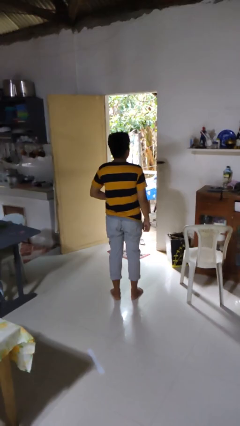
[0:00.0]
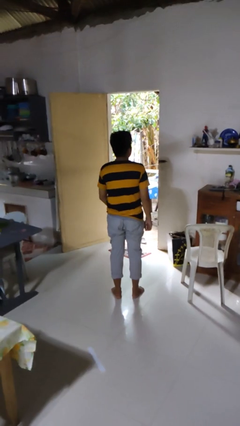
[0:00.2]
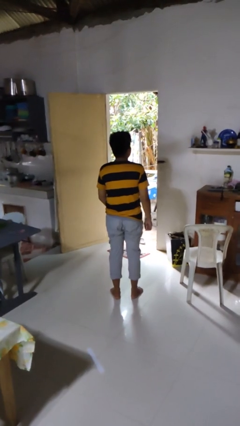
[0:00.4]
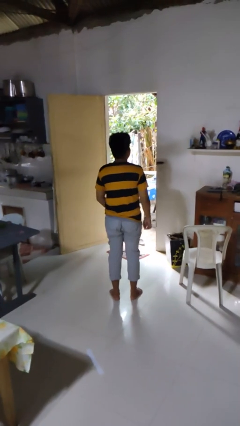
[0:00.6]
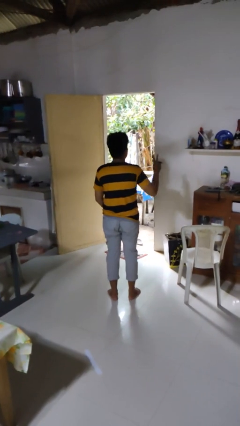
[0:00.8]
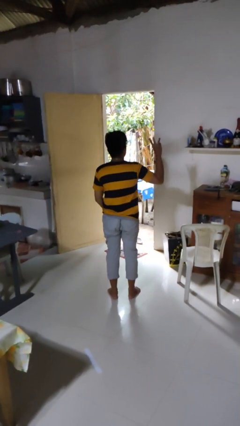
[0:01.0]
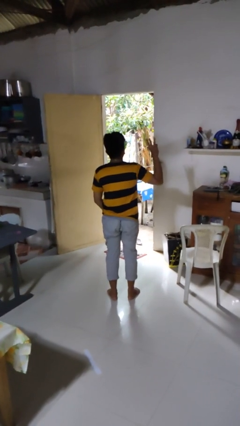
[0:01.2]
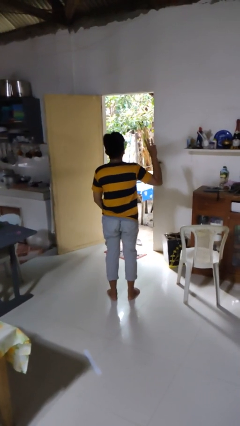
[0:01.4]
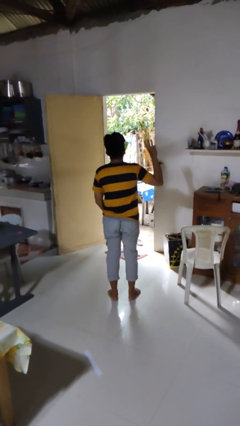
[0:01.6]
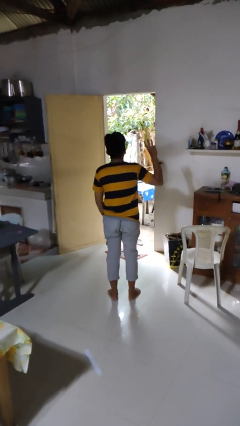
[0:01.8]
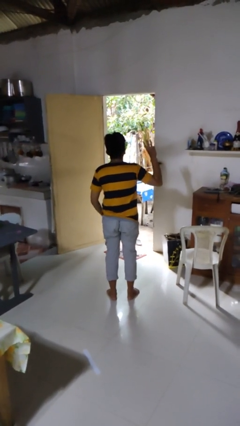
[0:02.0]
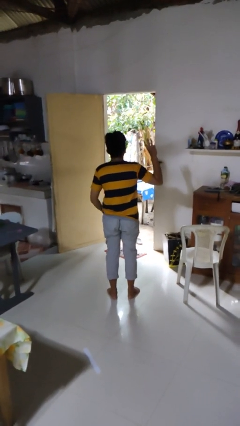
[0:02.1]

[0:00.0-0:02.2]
person gestures number three

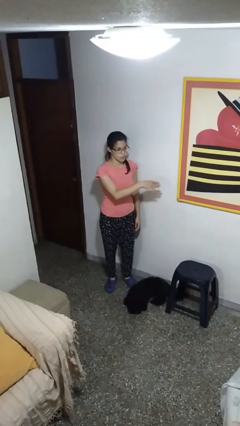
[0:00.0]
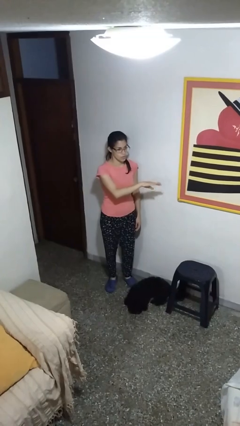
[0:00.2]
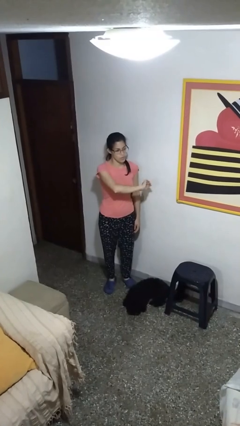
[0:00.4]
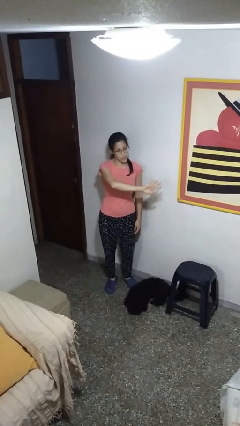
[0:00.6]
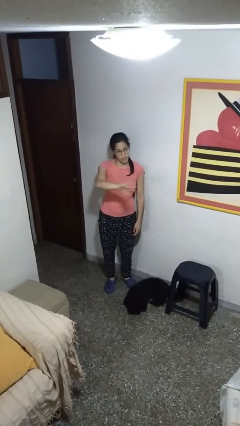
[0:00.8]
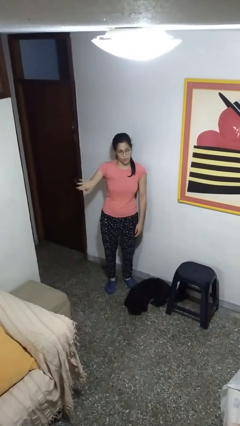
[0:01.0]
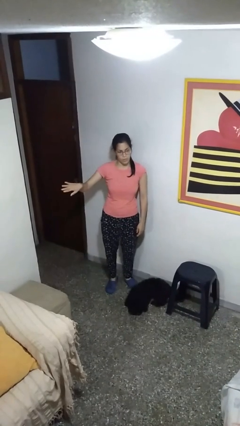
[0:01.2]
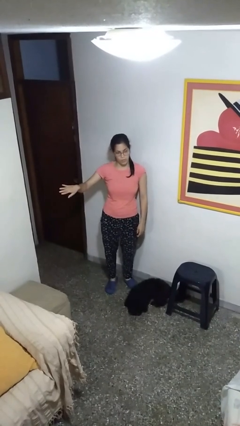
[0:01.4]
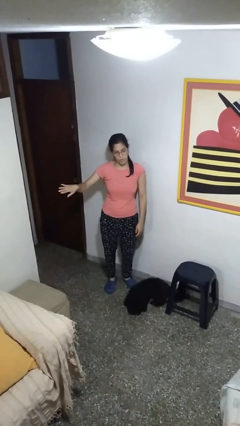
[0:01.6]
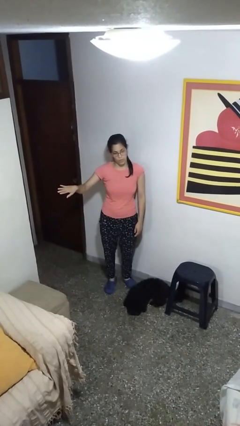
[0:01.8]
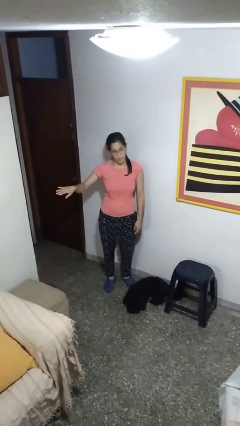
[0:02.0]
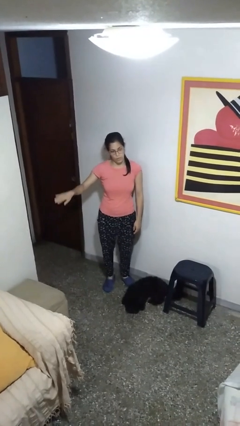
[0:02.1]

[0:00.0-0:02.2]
person gestures swipe right

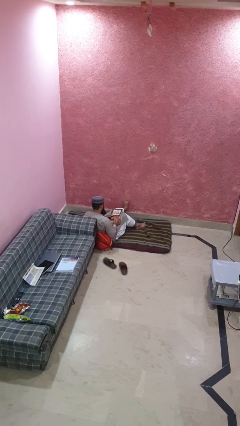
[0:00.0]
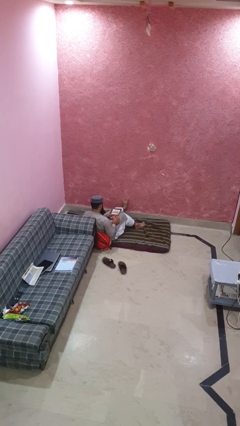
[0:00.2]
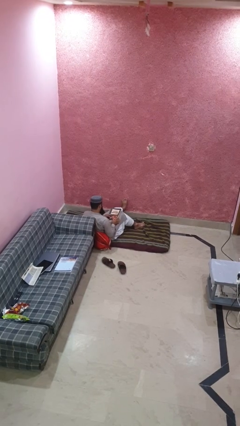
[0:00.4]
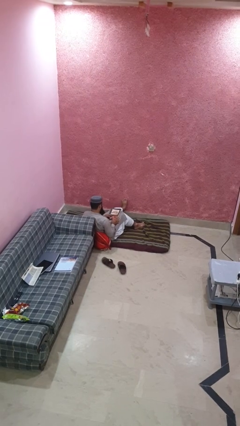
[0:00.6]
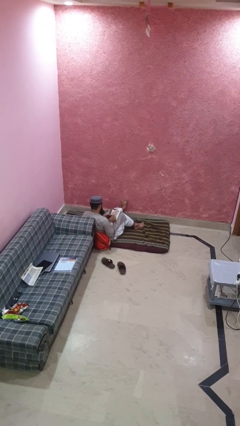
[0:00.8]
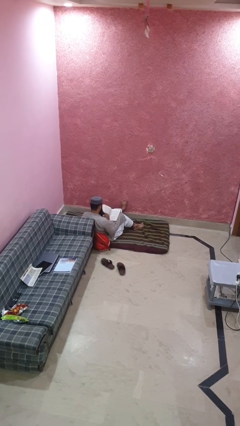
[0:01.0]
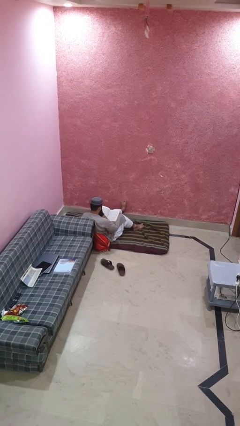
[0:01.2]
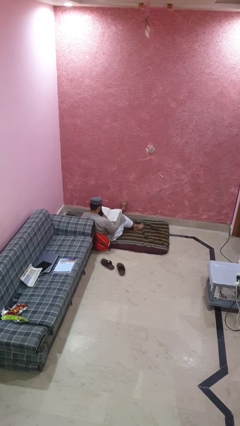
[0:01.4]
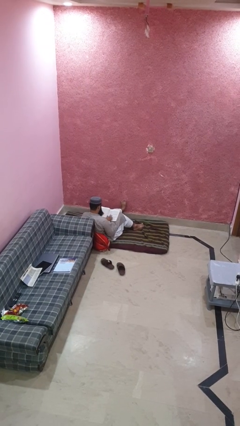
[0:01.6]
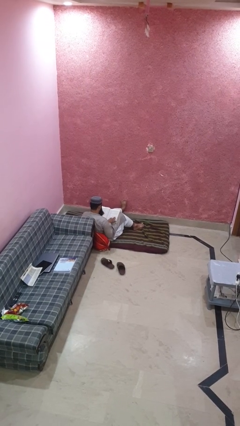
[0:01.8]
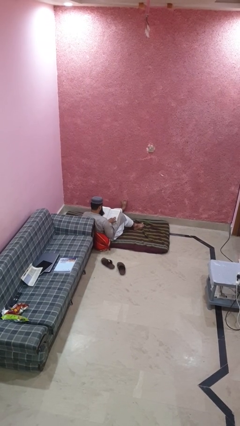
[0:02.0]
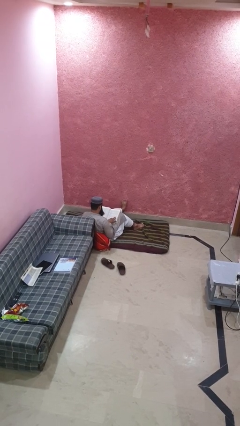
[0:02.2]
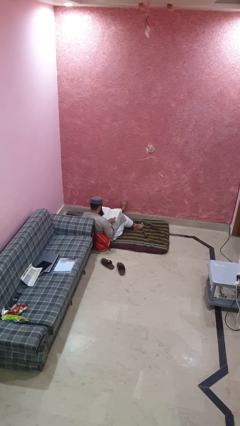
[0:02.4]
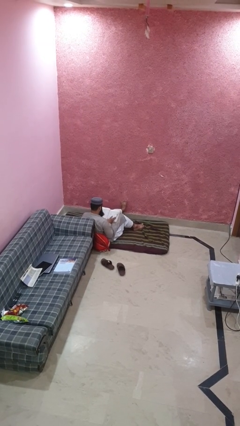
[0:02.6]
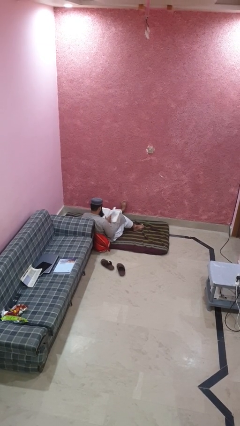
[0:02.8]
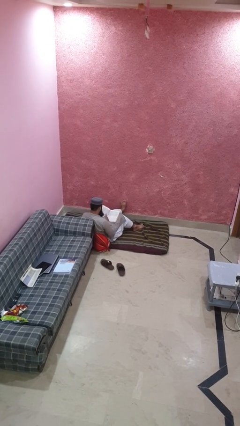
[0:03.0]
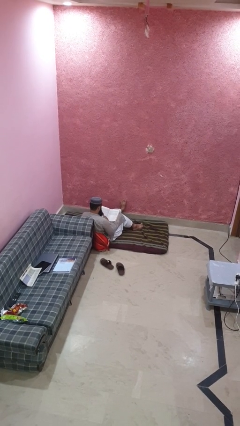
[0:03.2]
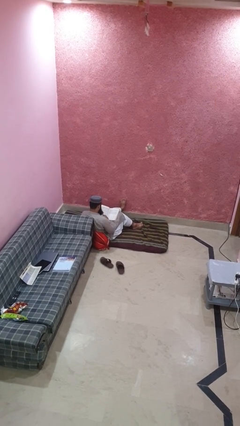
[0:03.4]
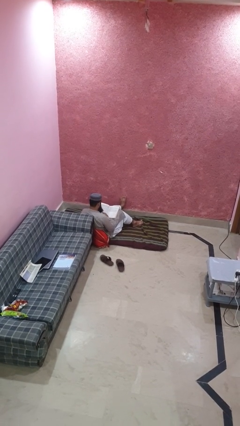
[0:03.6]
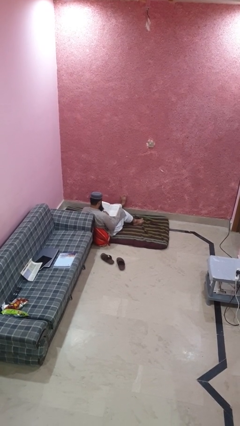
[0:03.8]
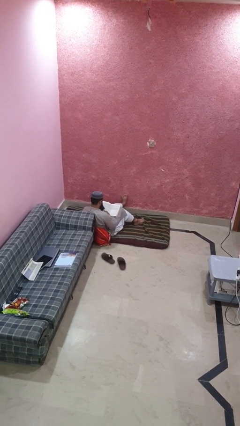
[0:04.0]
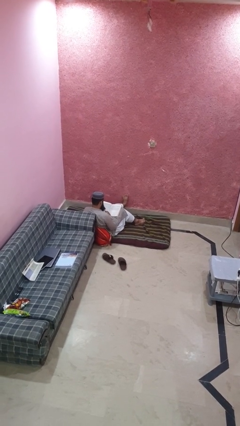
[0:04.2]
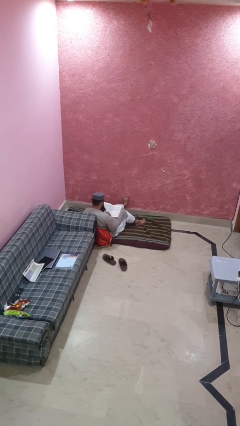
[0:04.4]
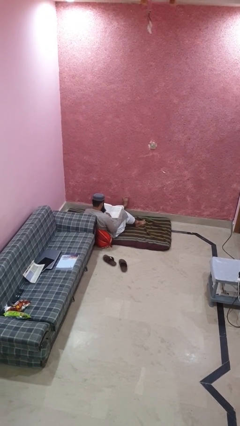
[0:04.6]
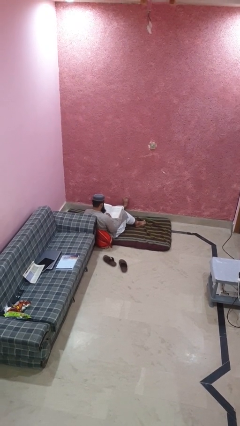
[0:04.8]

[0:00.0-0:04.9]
person reads book

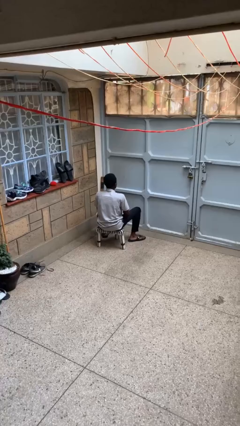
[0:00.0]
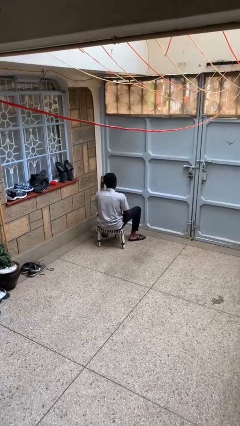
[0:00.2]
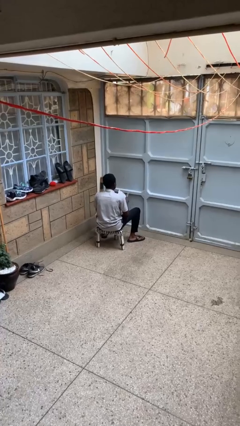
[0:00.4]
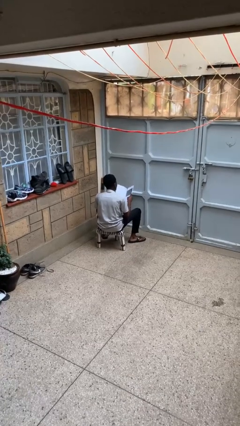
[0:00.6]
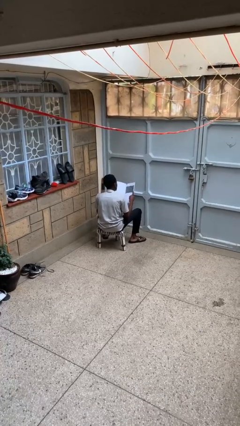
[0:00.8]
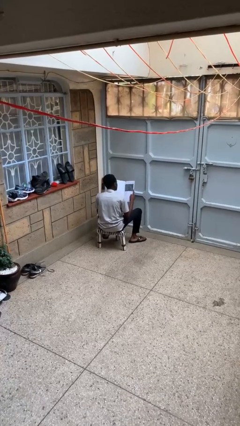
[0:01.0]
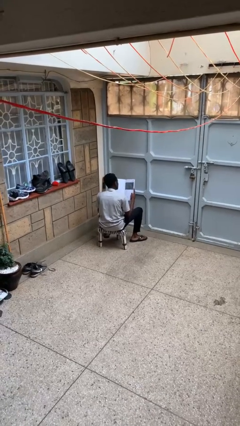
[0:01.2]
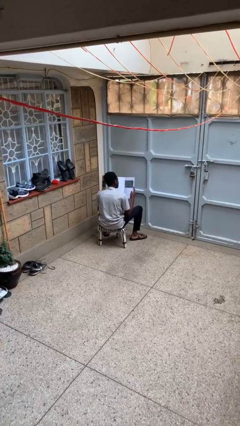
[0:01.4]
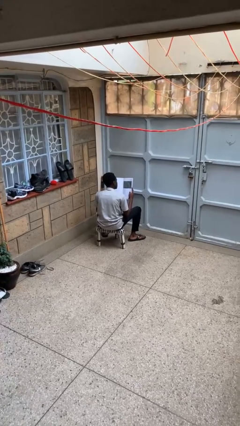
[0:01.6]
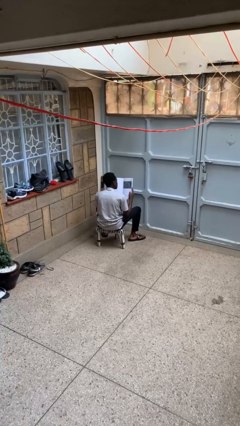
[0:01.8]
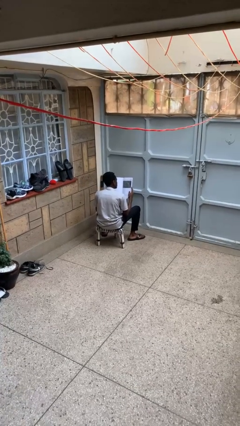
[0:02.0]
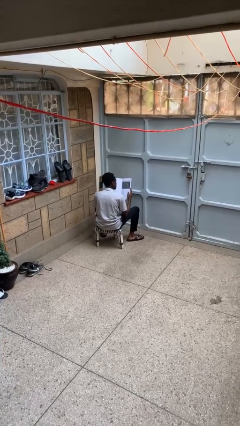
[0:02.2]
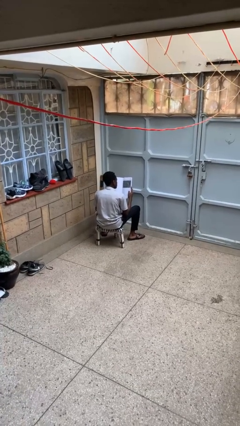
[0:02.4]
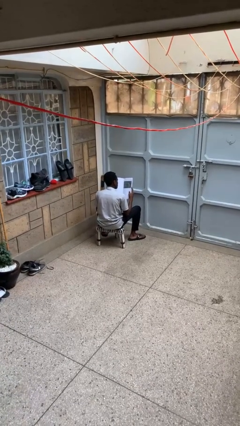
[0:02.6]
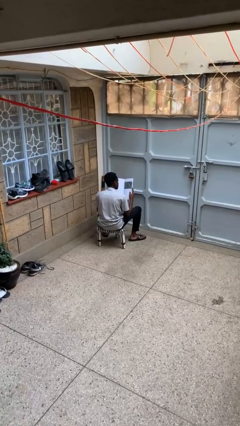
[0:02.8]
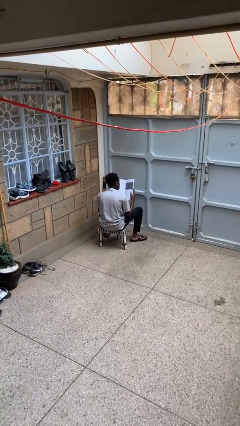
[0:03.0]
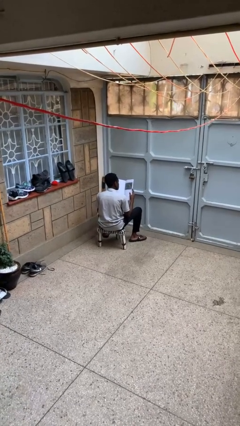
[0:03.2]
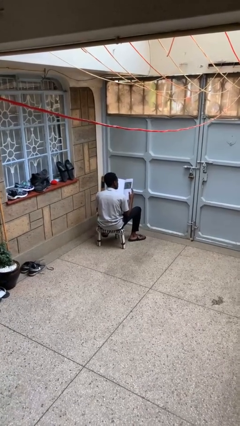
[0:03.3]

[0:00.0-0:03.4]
person reads newspaper

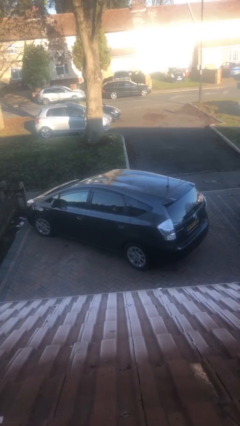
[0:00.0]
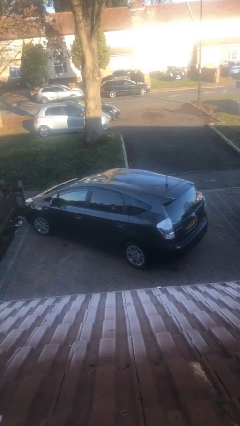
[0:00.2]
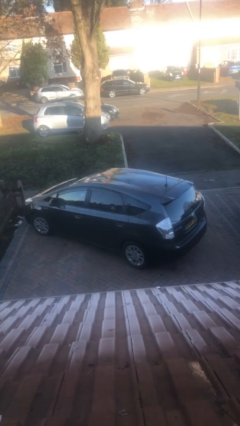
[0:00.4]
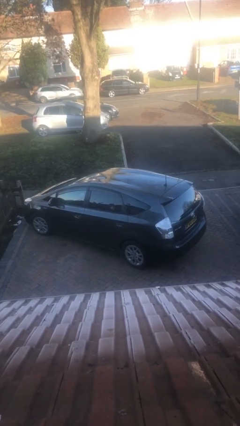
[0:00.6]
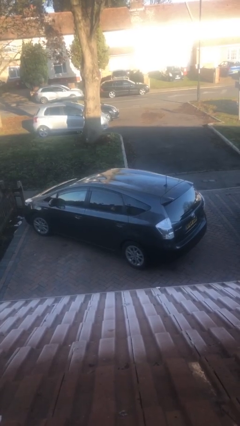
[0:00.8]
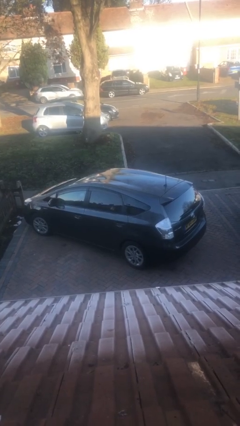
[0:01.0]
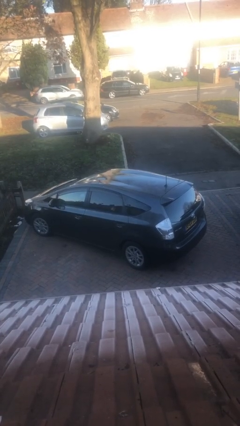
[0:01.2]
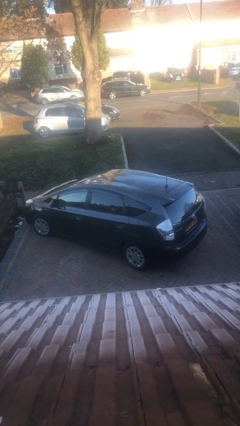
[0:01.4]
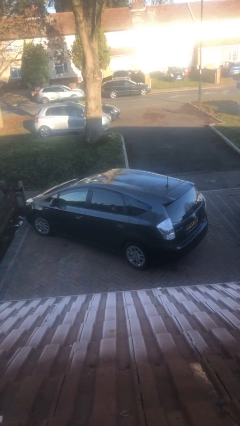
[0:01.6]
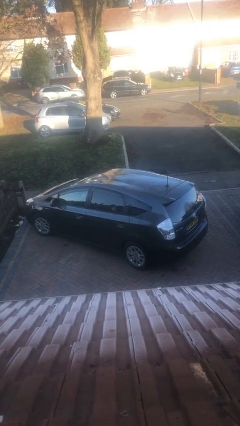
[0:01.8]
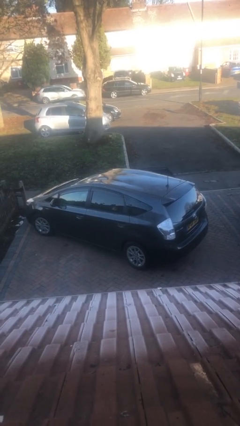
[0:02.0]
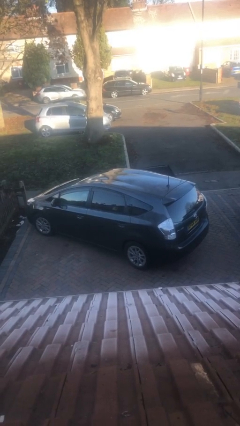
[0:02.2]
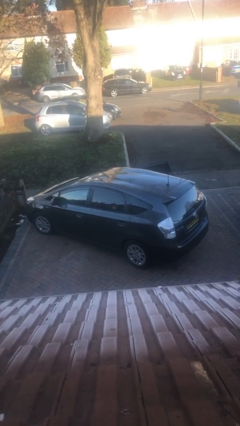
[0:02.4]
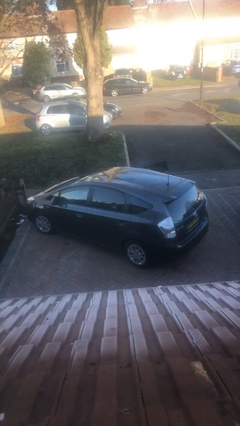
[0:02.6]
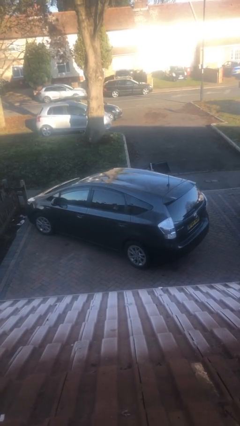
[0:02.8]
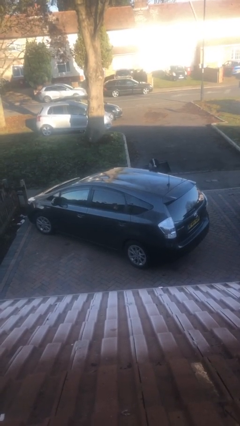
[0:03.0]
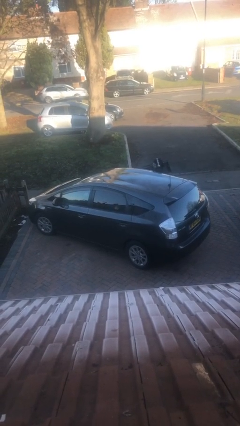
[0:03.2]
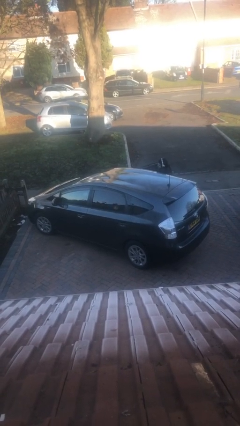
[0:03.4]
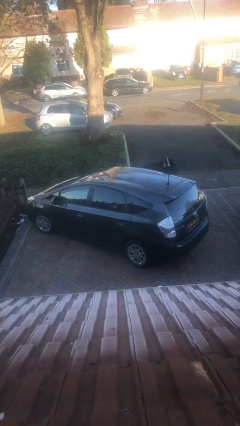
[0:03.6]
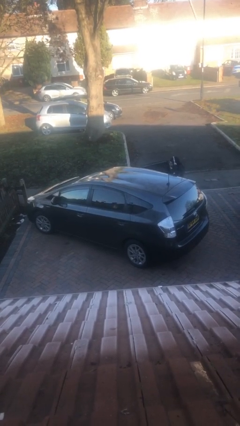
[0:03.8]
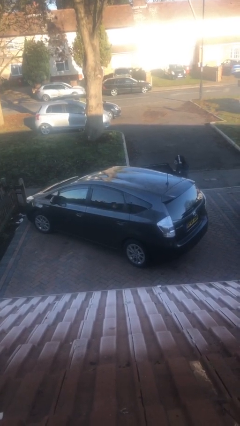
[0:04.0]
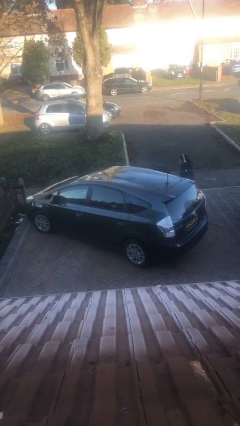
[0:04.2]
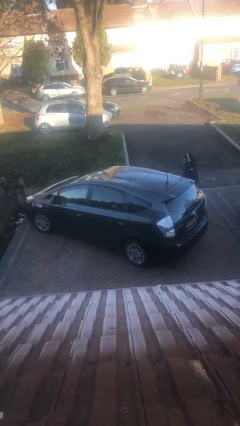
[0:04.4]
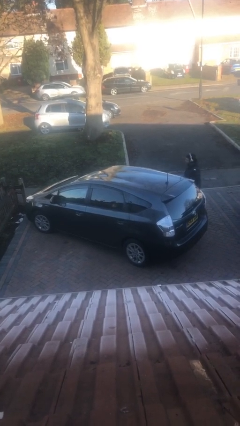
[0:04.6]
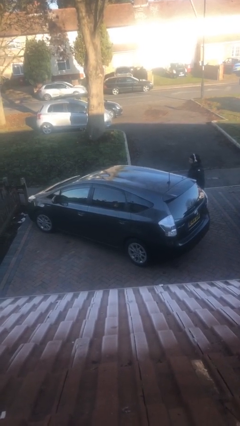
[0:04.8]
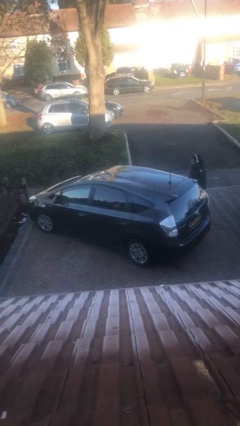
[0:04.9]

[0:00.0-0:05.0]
car drops off person

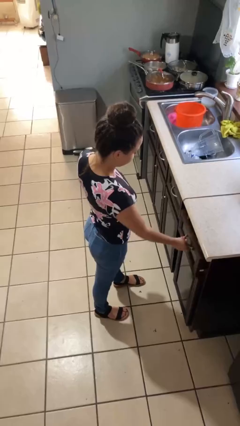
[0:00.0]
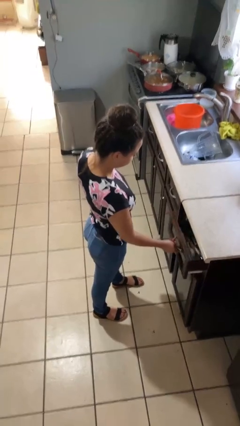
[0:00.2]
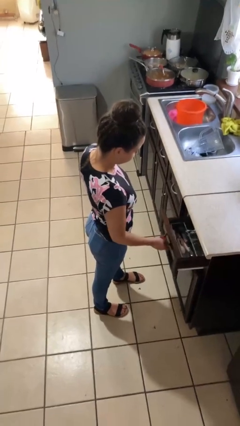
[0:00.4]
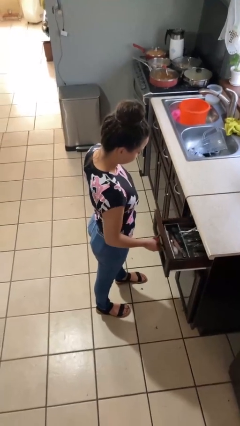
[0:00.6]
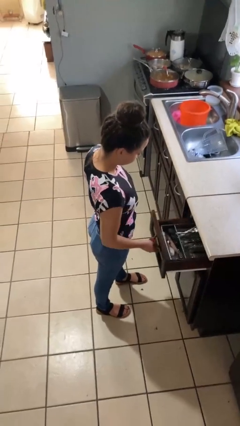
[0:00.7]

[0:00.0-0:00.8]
person opens kitchen drawer
